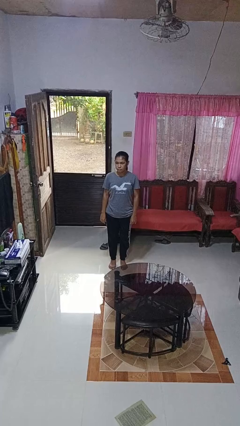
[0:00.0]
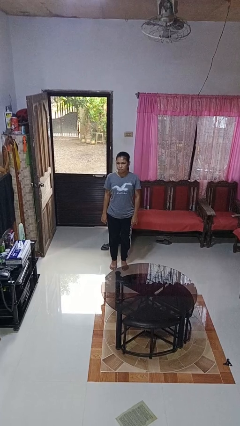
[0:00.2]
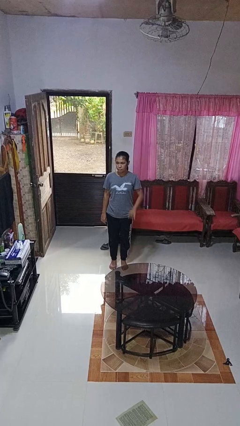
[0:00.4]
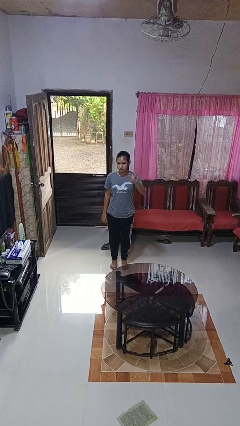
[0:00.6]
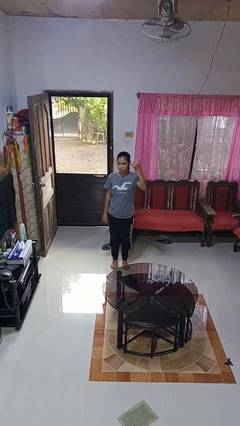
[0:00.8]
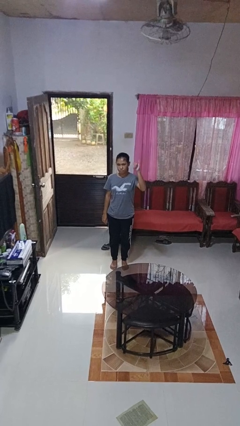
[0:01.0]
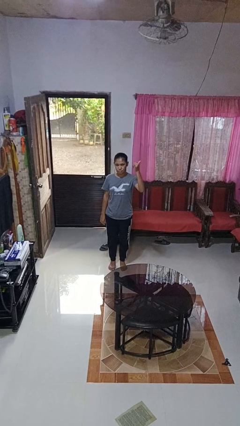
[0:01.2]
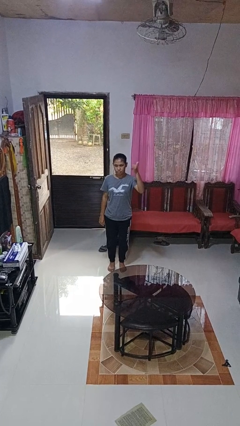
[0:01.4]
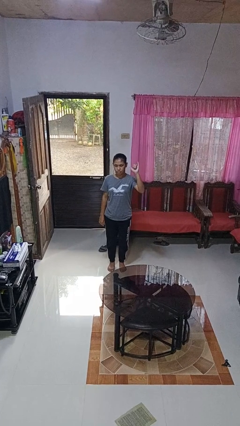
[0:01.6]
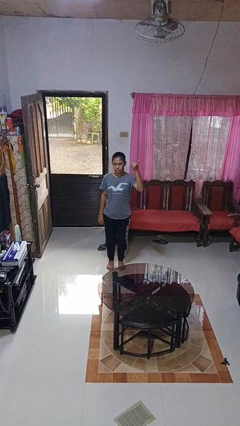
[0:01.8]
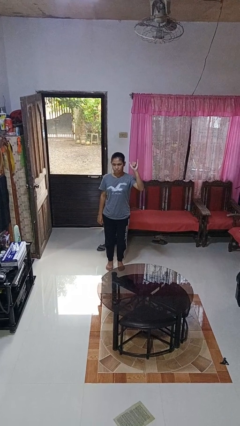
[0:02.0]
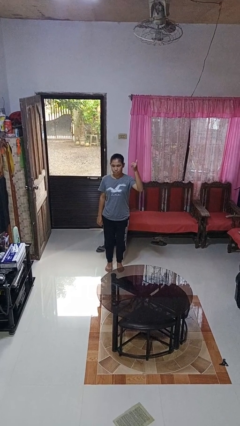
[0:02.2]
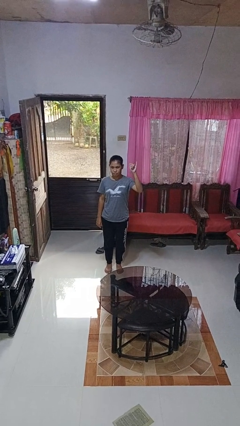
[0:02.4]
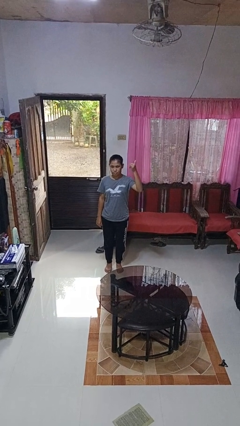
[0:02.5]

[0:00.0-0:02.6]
person gestures hang loose

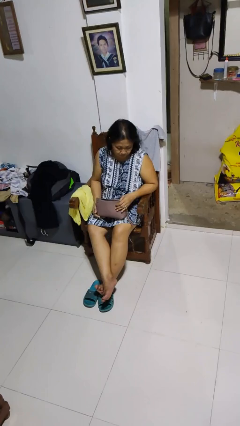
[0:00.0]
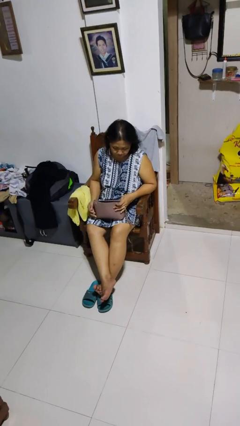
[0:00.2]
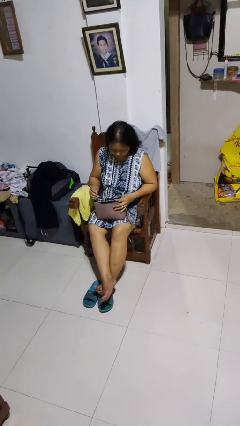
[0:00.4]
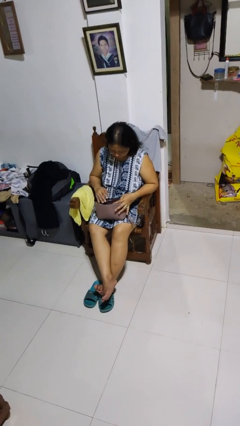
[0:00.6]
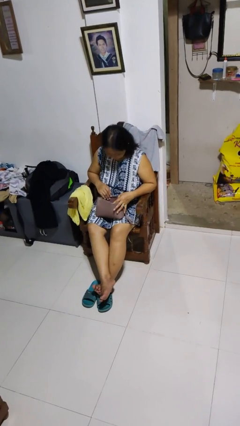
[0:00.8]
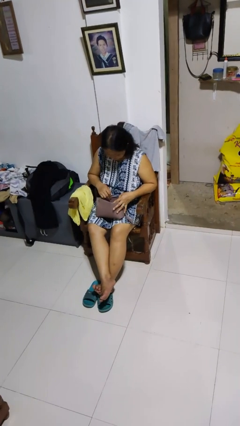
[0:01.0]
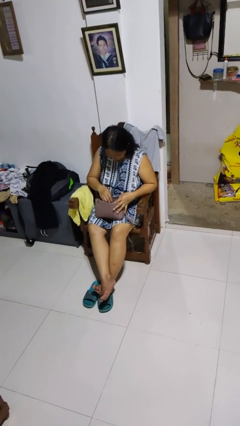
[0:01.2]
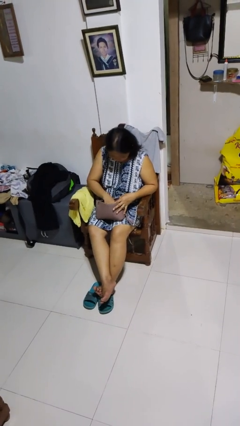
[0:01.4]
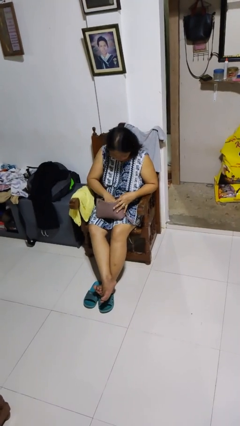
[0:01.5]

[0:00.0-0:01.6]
person searches in purse

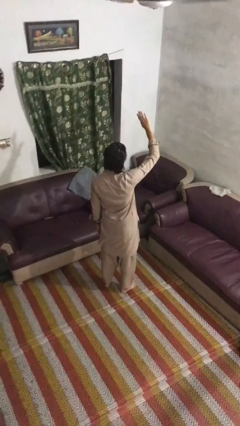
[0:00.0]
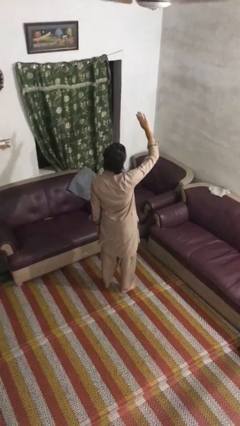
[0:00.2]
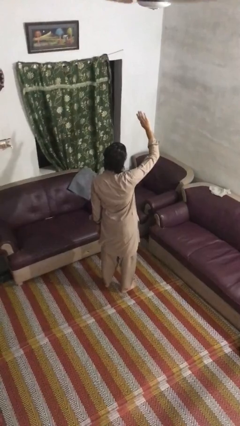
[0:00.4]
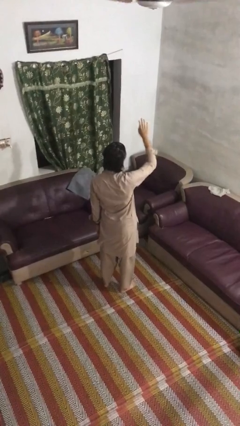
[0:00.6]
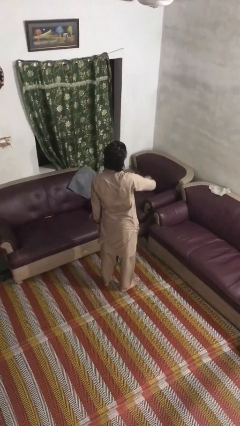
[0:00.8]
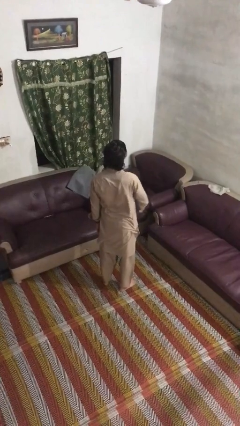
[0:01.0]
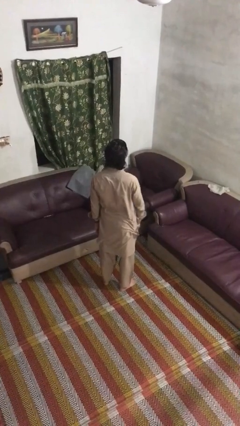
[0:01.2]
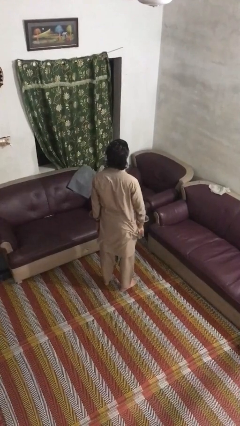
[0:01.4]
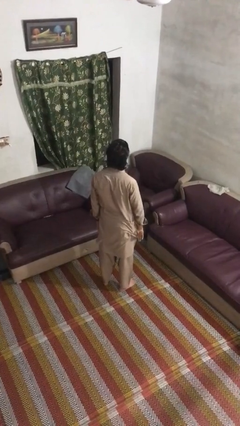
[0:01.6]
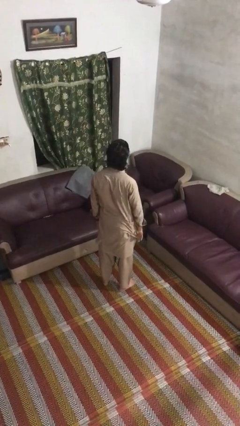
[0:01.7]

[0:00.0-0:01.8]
person gestures swipe down

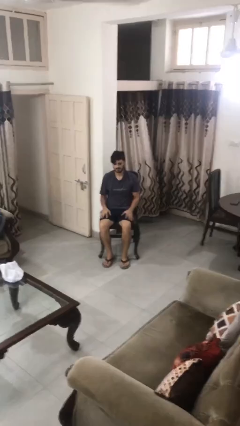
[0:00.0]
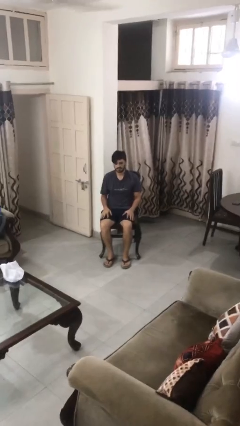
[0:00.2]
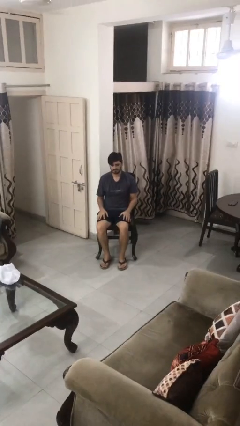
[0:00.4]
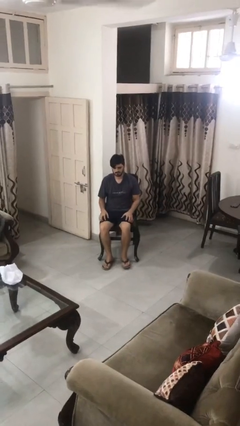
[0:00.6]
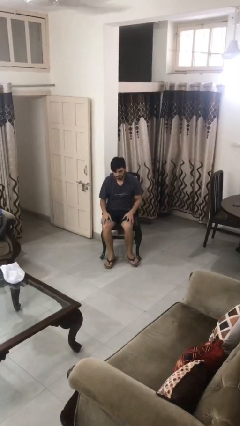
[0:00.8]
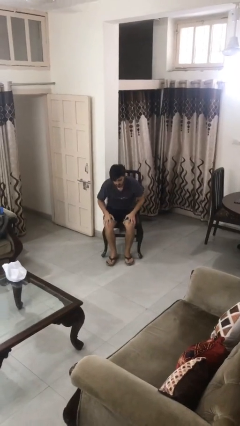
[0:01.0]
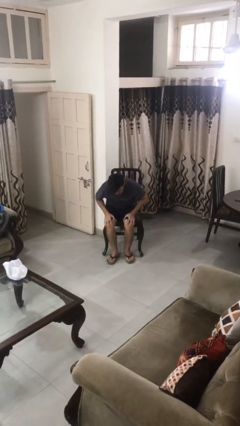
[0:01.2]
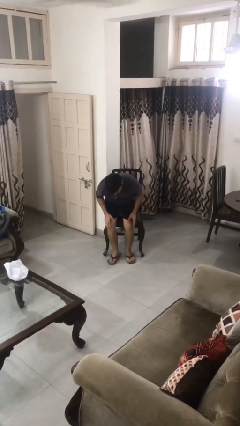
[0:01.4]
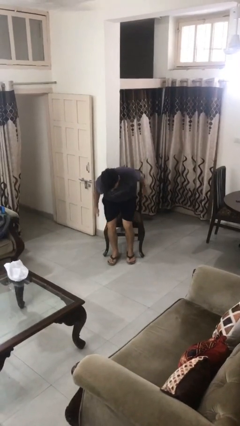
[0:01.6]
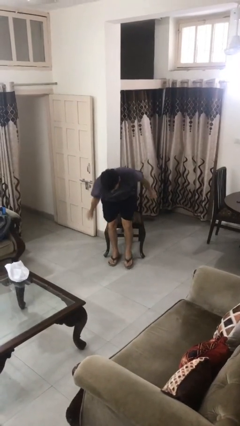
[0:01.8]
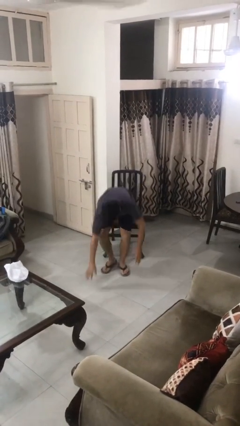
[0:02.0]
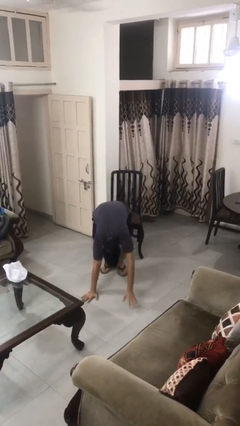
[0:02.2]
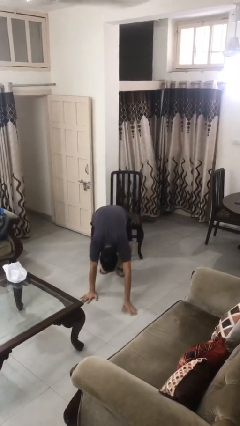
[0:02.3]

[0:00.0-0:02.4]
person falls from chair

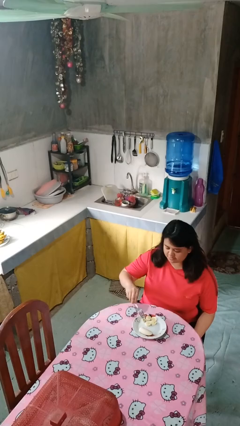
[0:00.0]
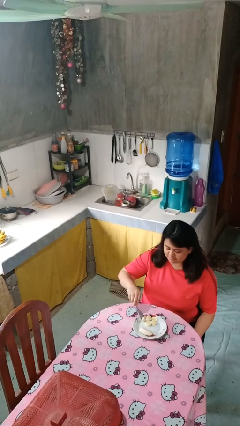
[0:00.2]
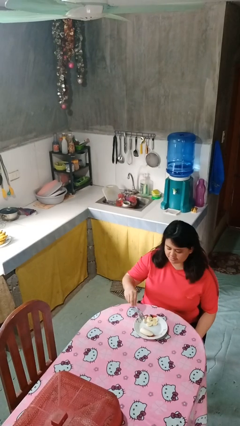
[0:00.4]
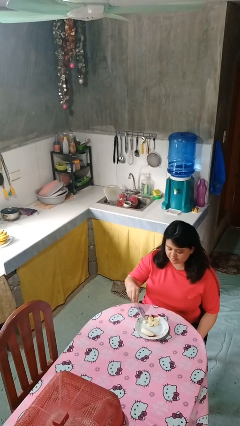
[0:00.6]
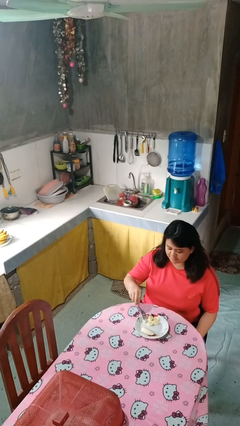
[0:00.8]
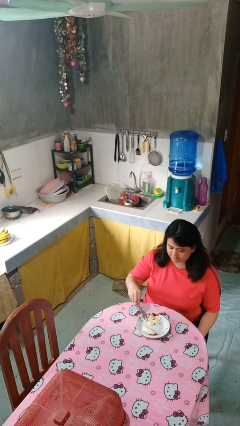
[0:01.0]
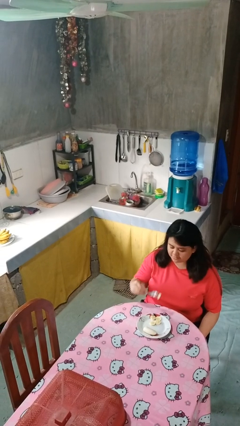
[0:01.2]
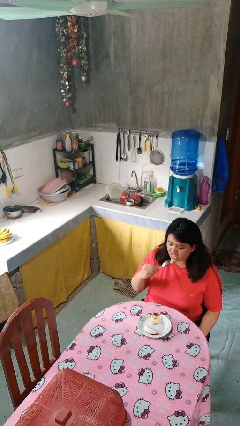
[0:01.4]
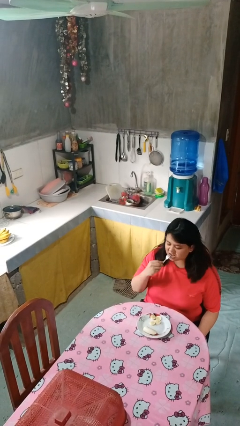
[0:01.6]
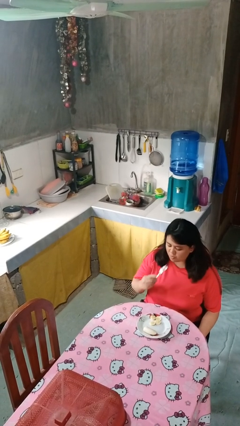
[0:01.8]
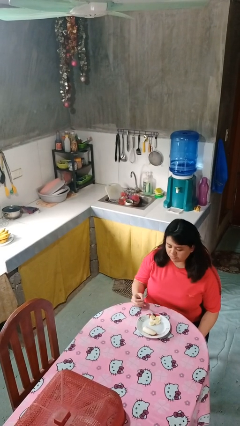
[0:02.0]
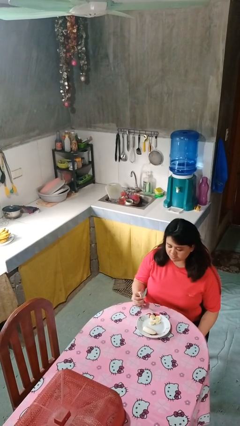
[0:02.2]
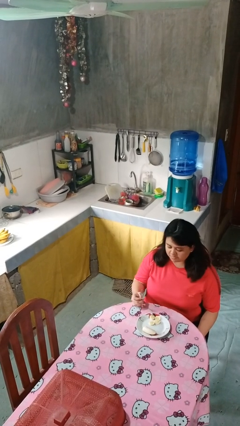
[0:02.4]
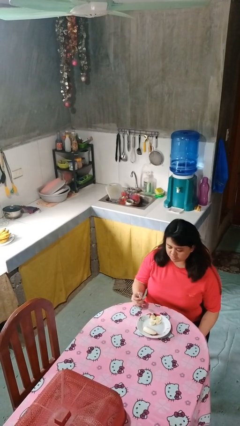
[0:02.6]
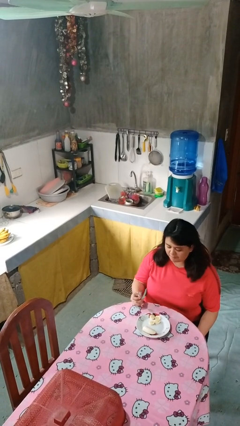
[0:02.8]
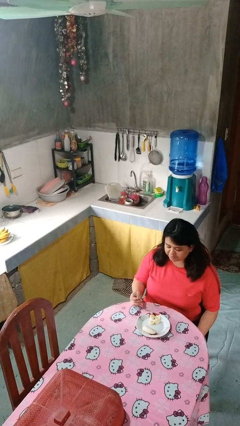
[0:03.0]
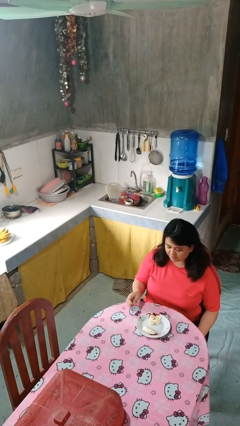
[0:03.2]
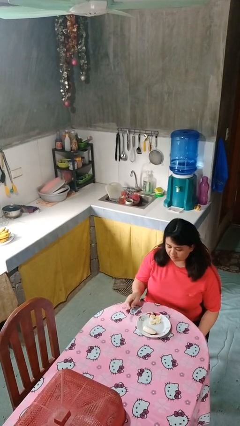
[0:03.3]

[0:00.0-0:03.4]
person eats with utensil

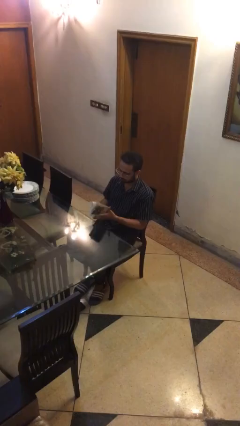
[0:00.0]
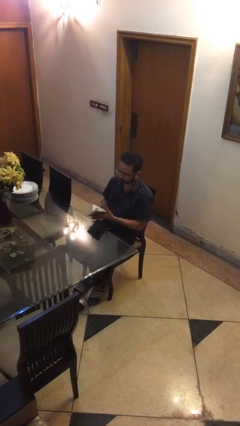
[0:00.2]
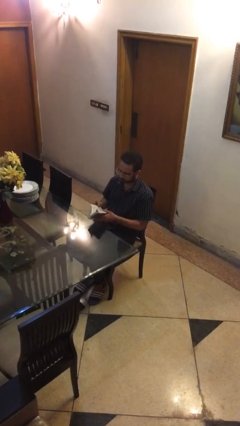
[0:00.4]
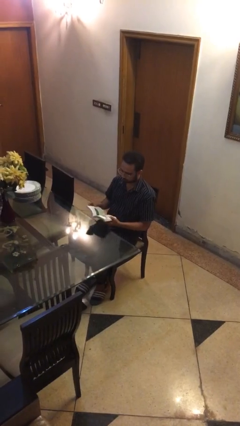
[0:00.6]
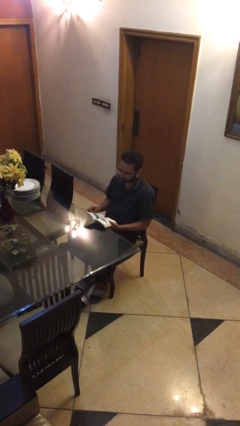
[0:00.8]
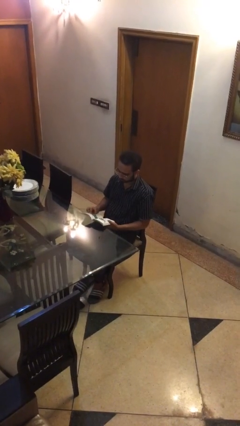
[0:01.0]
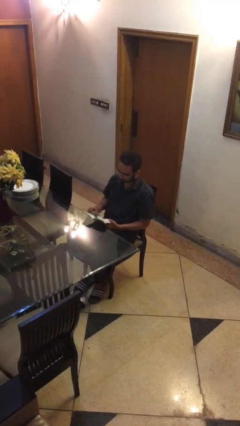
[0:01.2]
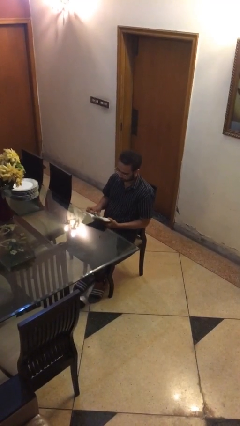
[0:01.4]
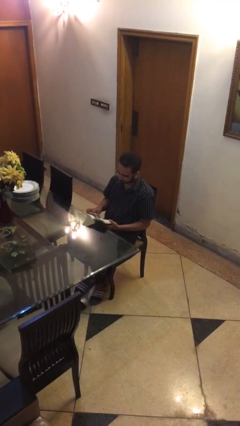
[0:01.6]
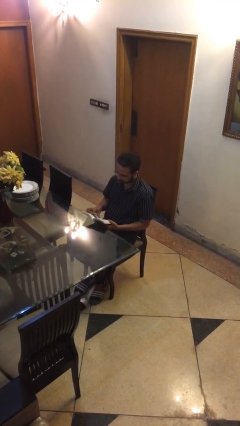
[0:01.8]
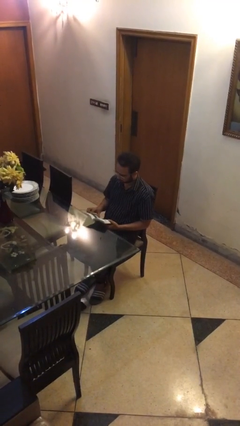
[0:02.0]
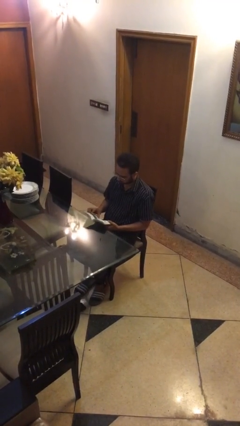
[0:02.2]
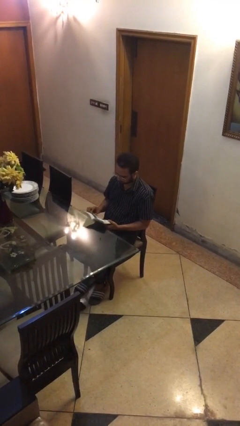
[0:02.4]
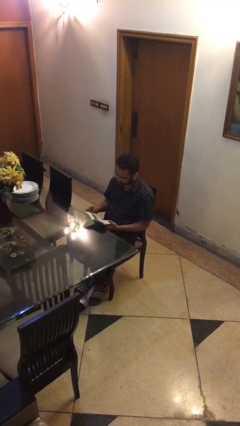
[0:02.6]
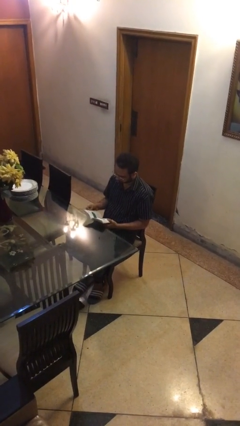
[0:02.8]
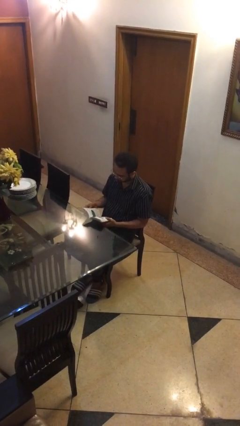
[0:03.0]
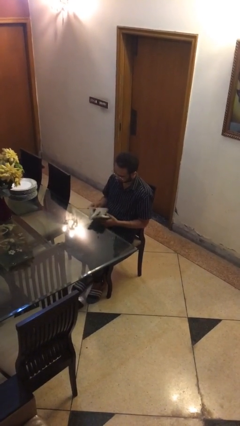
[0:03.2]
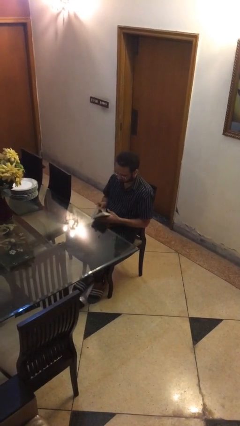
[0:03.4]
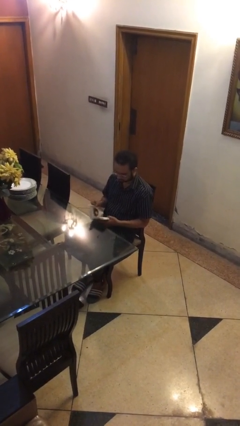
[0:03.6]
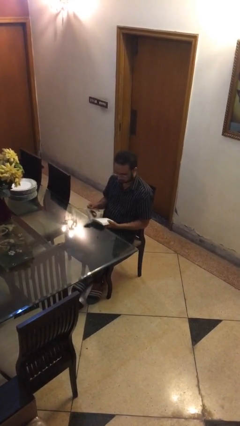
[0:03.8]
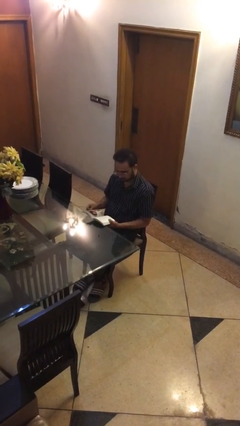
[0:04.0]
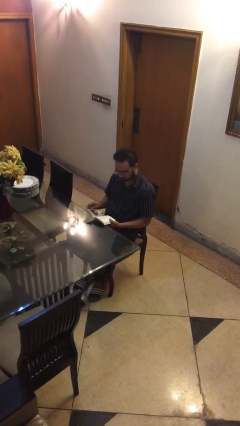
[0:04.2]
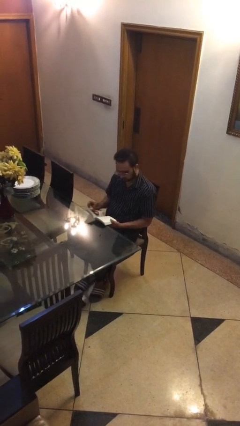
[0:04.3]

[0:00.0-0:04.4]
person reads document

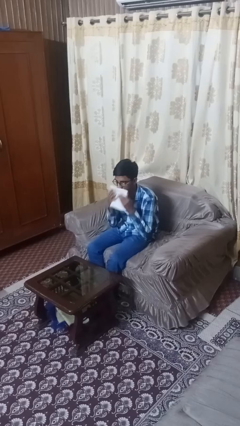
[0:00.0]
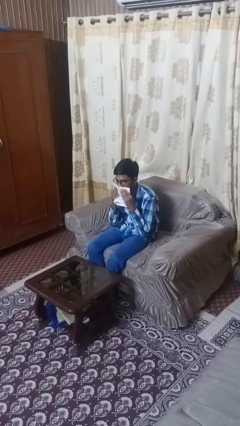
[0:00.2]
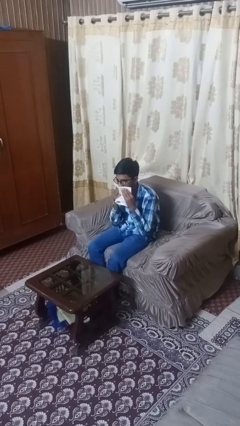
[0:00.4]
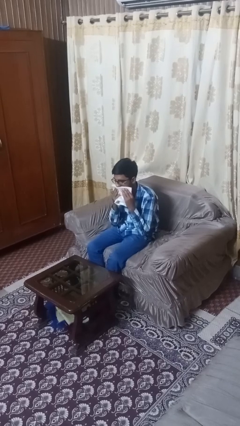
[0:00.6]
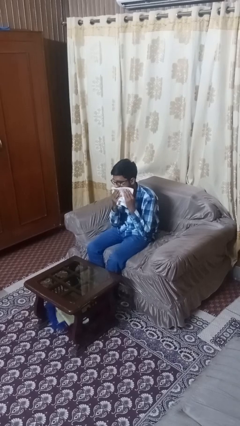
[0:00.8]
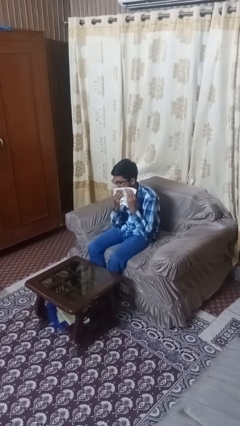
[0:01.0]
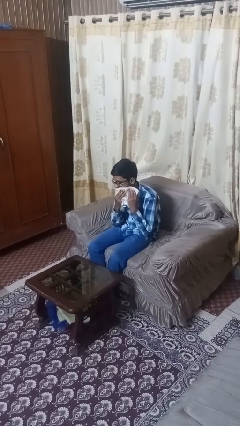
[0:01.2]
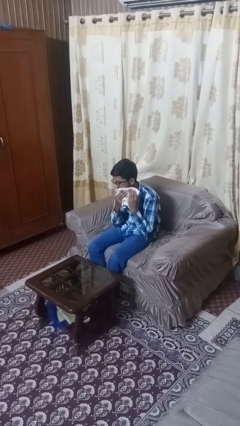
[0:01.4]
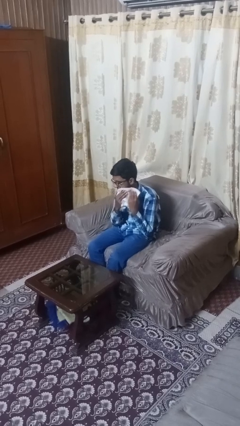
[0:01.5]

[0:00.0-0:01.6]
person wipes mouth with napkin
